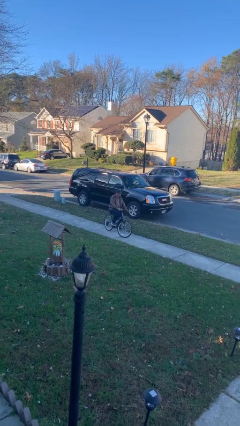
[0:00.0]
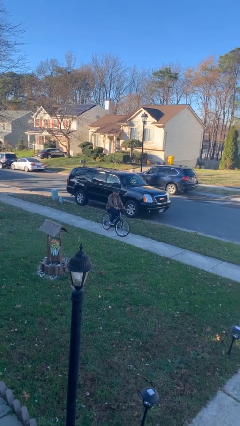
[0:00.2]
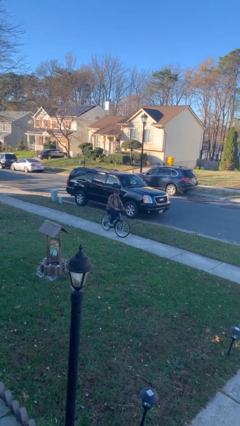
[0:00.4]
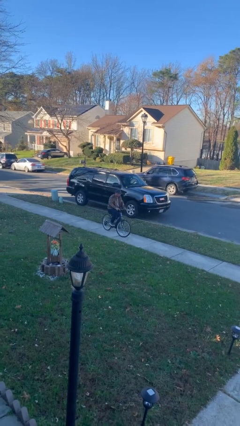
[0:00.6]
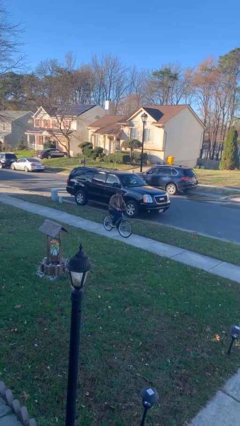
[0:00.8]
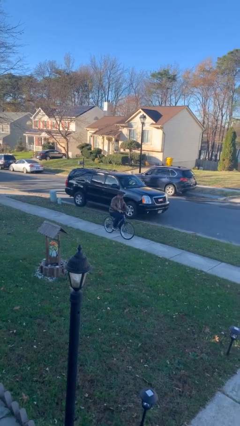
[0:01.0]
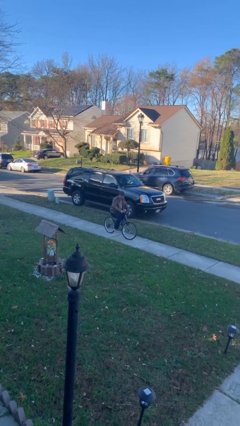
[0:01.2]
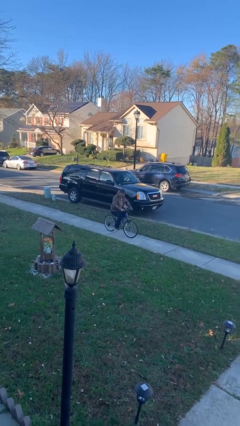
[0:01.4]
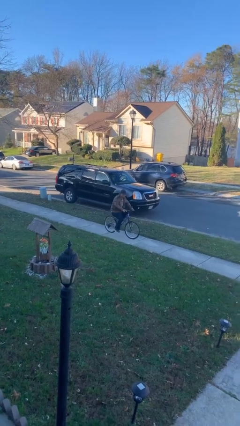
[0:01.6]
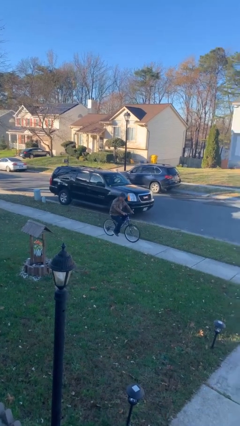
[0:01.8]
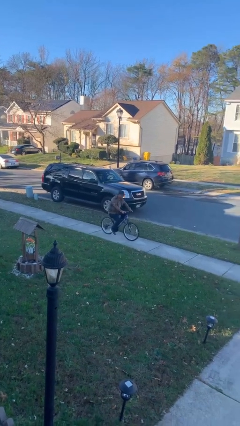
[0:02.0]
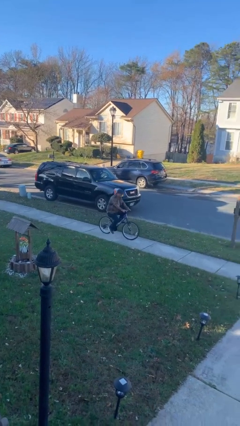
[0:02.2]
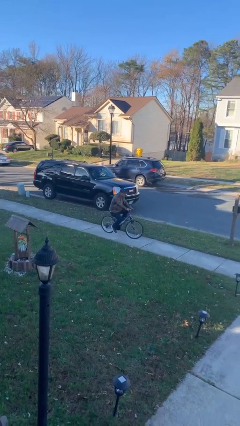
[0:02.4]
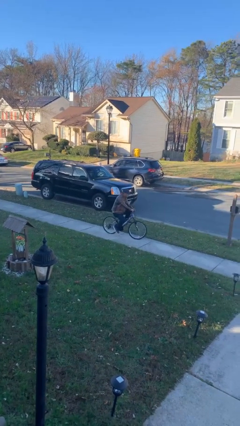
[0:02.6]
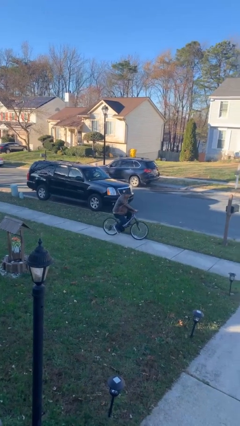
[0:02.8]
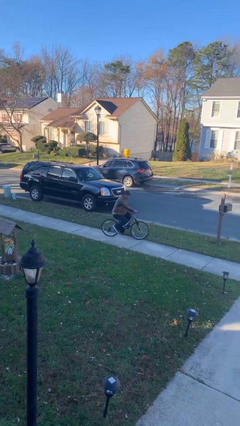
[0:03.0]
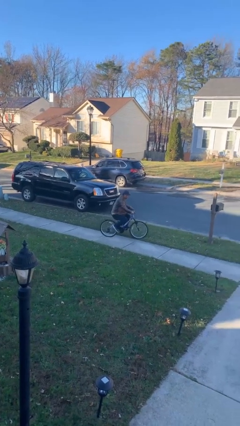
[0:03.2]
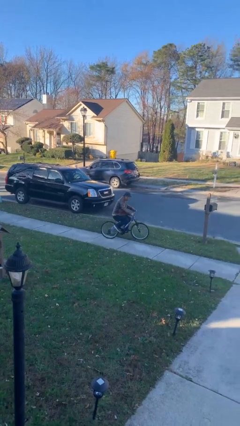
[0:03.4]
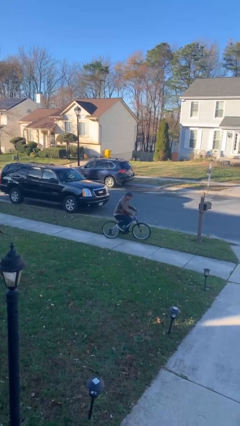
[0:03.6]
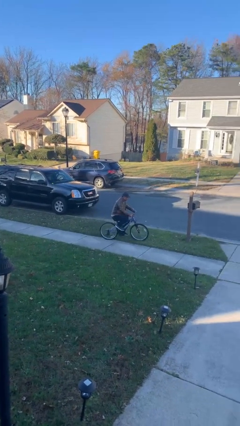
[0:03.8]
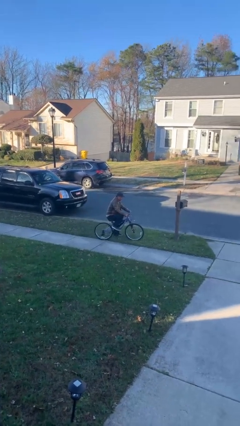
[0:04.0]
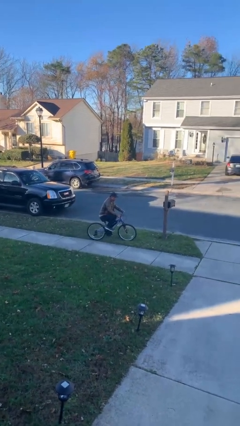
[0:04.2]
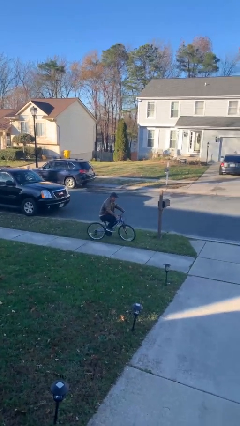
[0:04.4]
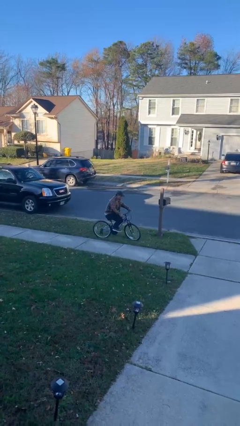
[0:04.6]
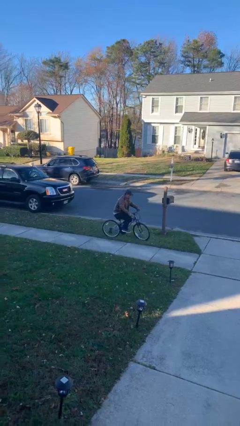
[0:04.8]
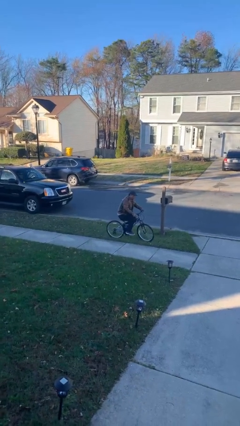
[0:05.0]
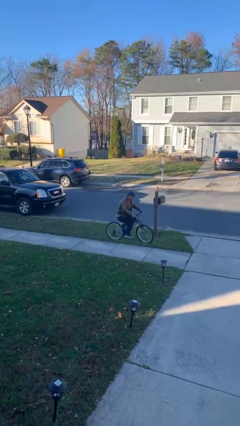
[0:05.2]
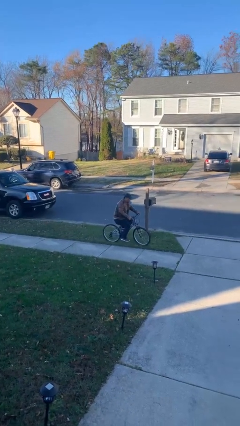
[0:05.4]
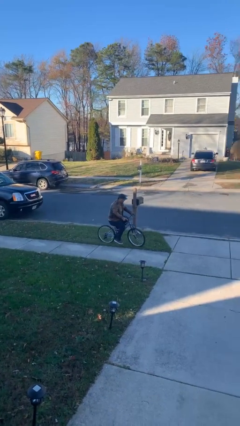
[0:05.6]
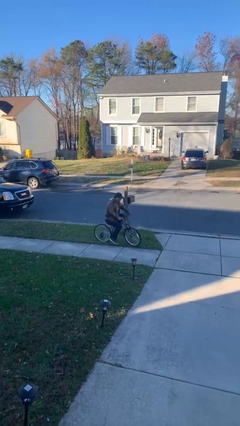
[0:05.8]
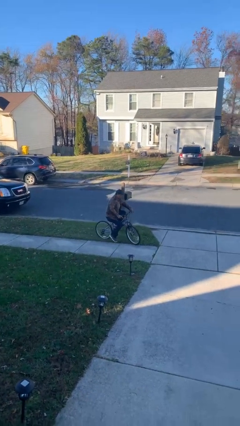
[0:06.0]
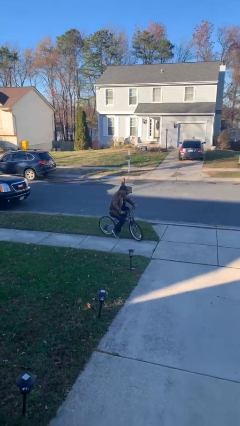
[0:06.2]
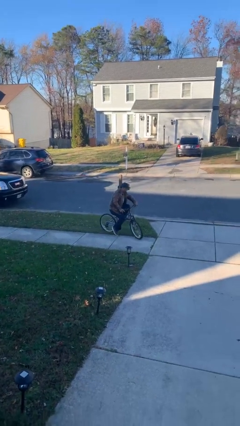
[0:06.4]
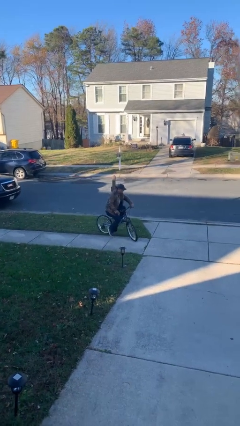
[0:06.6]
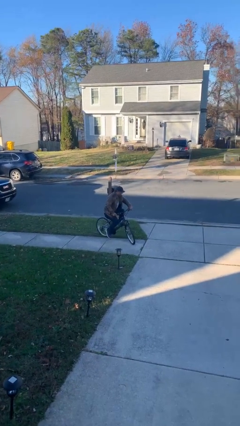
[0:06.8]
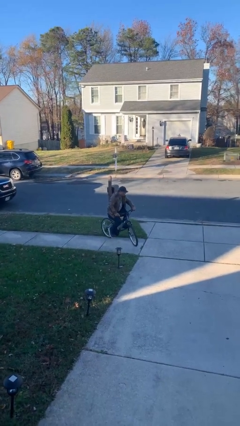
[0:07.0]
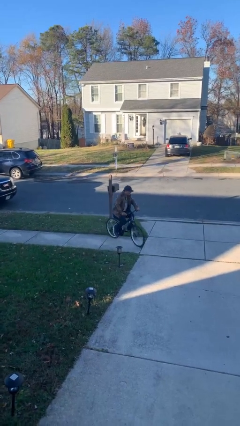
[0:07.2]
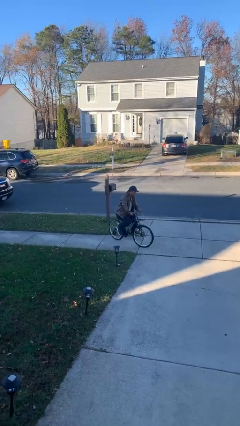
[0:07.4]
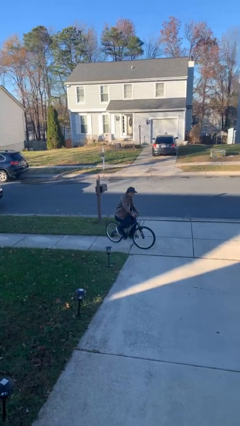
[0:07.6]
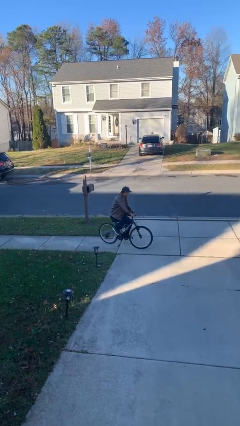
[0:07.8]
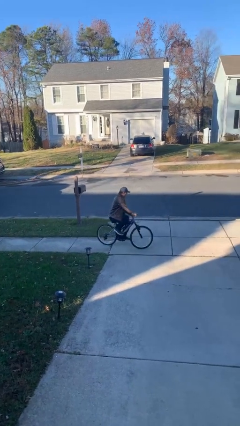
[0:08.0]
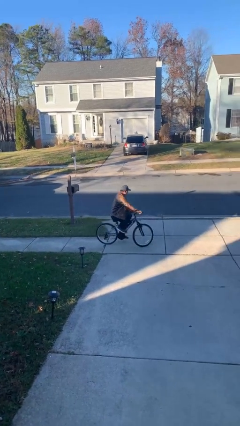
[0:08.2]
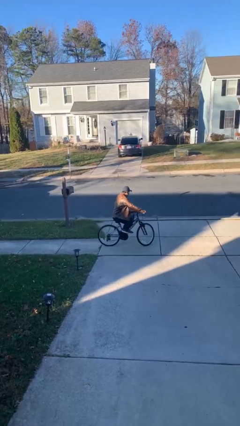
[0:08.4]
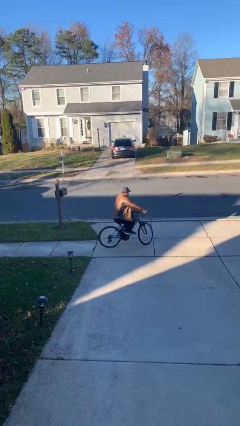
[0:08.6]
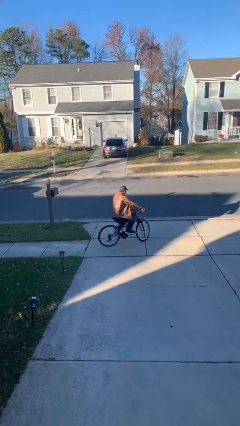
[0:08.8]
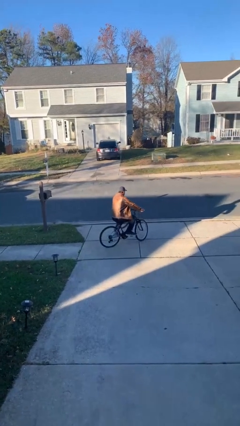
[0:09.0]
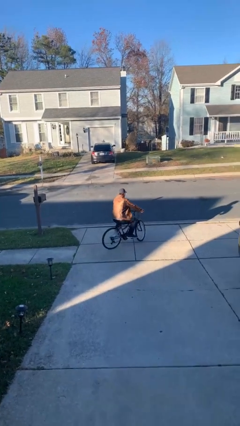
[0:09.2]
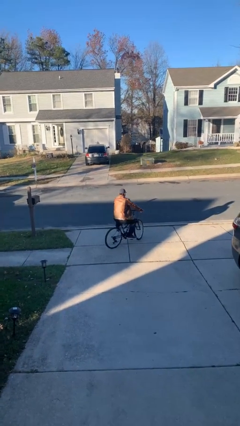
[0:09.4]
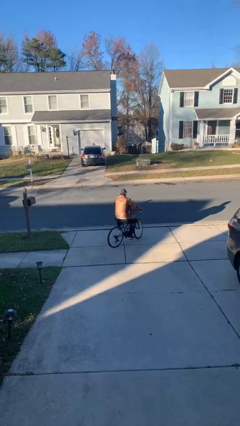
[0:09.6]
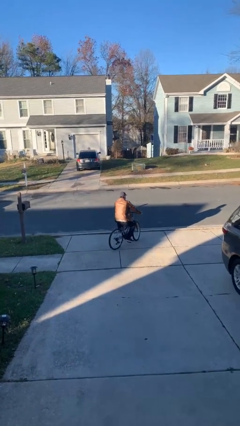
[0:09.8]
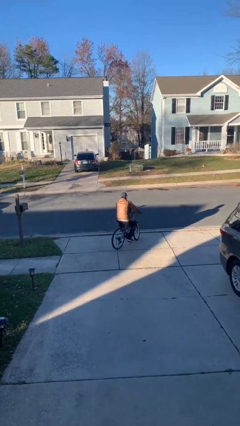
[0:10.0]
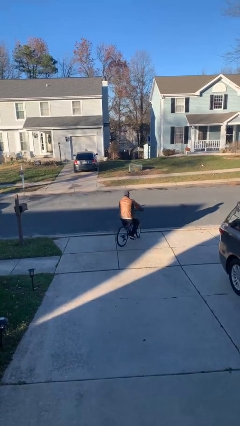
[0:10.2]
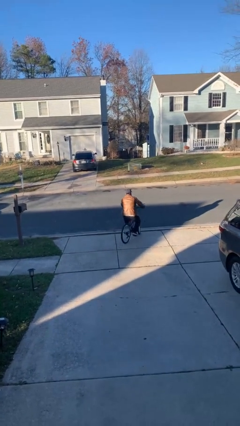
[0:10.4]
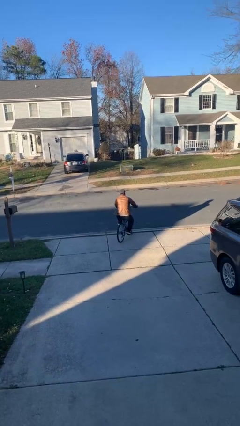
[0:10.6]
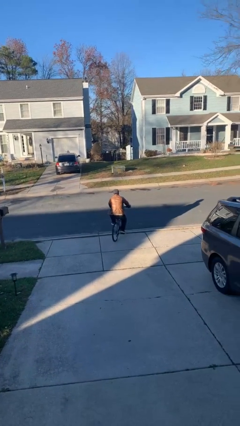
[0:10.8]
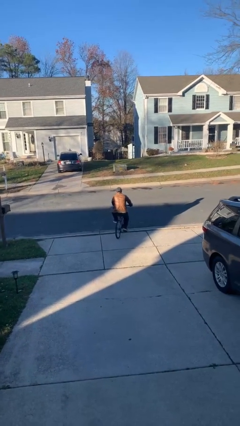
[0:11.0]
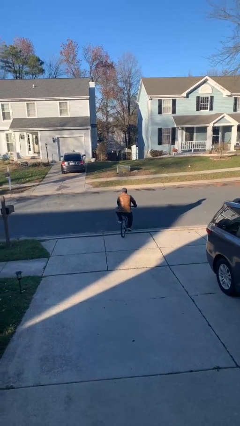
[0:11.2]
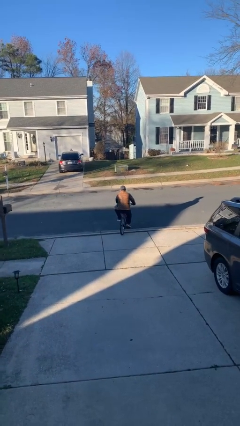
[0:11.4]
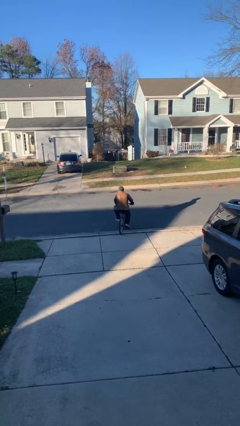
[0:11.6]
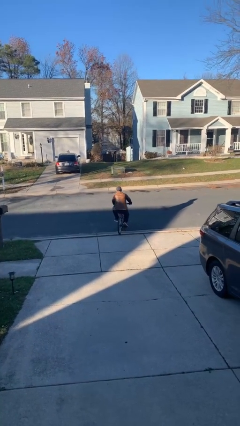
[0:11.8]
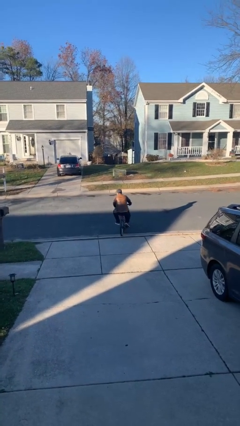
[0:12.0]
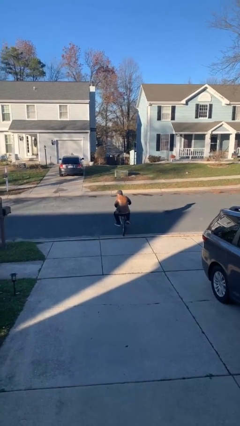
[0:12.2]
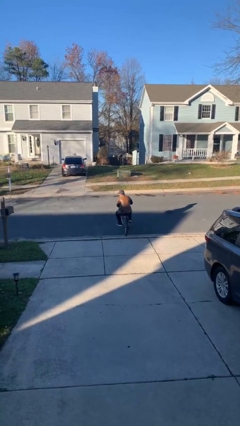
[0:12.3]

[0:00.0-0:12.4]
person rides bicycle

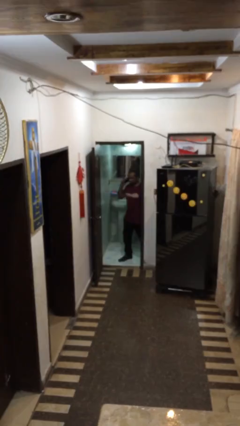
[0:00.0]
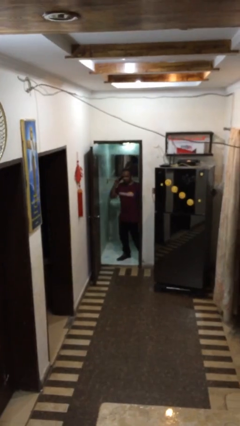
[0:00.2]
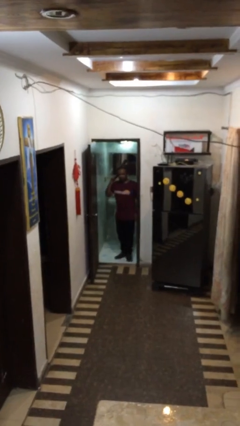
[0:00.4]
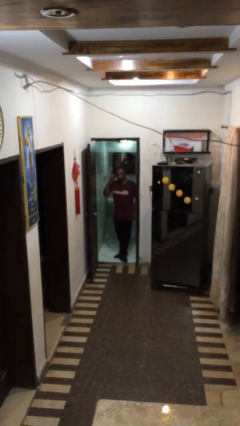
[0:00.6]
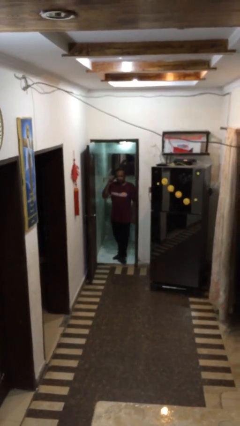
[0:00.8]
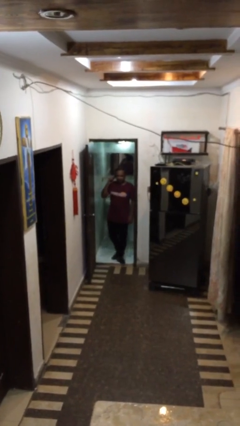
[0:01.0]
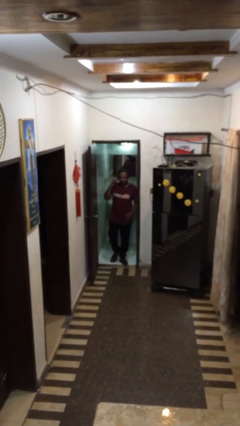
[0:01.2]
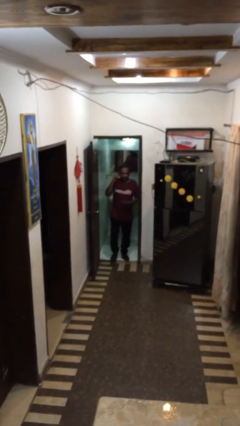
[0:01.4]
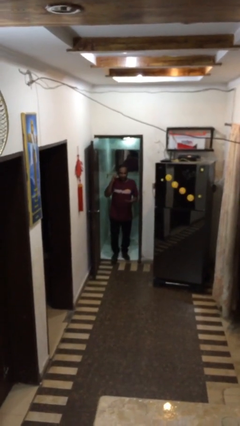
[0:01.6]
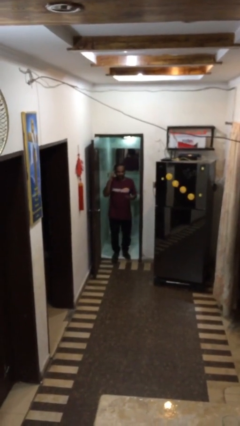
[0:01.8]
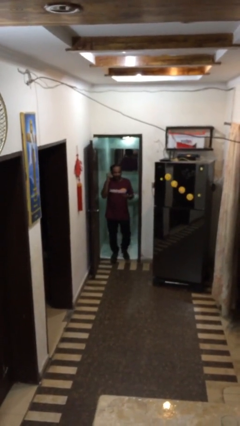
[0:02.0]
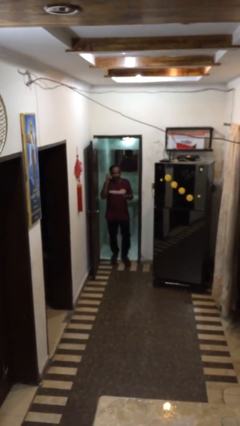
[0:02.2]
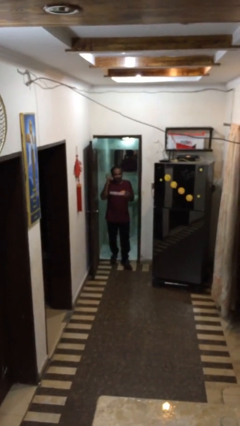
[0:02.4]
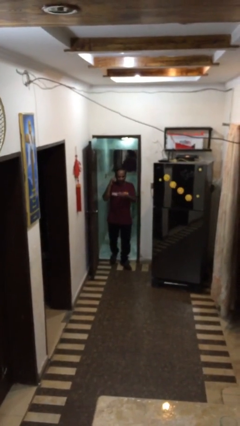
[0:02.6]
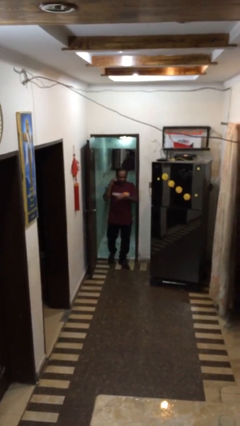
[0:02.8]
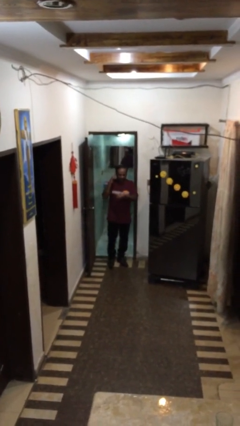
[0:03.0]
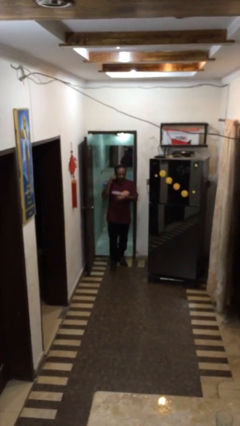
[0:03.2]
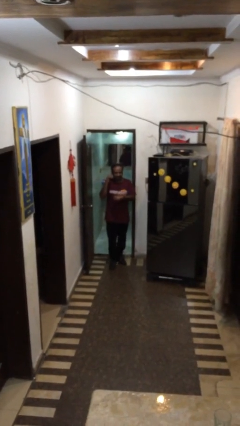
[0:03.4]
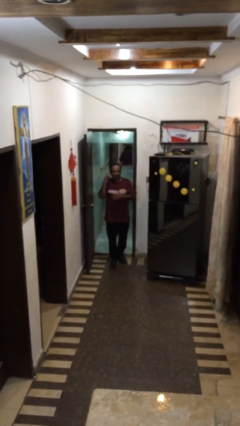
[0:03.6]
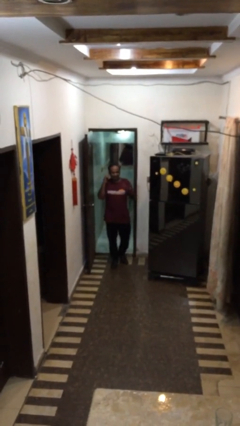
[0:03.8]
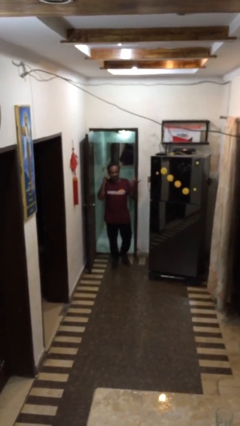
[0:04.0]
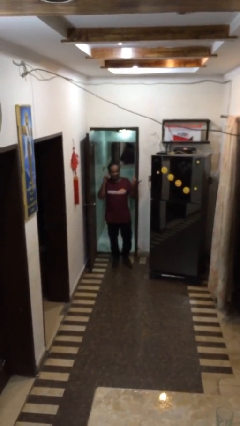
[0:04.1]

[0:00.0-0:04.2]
person enters scene through structure

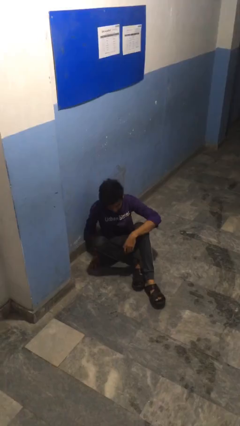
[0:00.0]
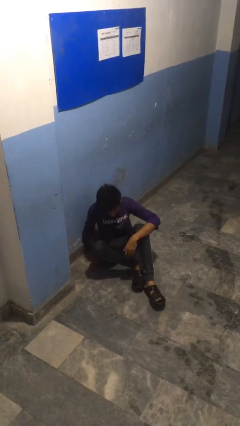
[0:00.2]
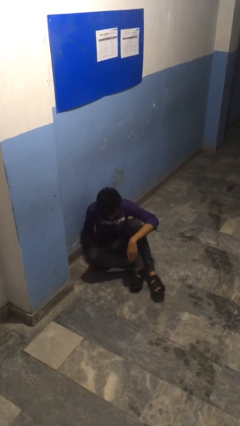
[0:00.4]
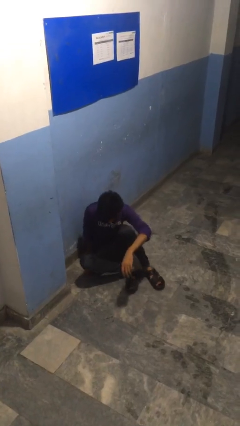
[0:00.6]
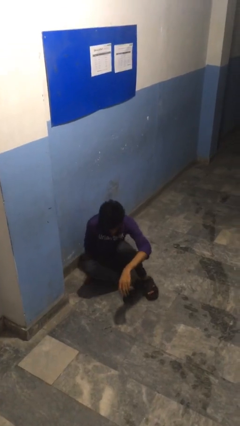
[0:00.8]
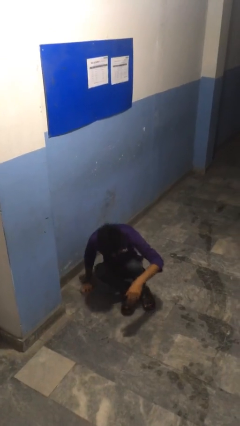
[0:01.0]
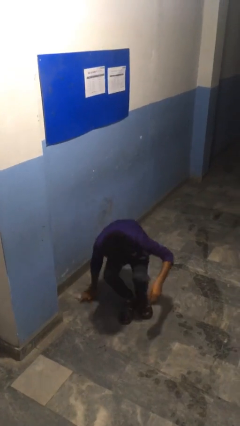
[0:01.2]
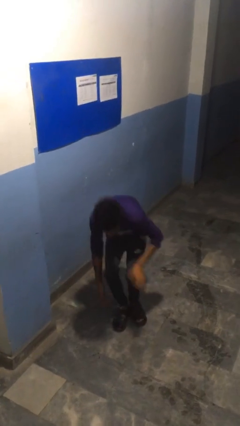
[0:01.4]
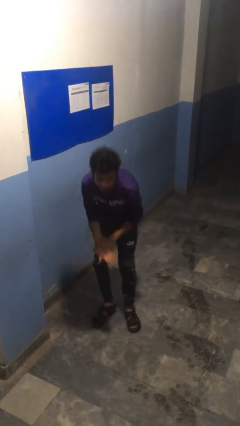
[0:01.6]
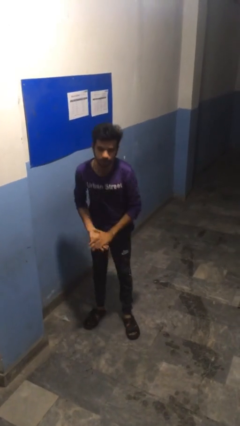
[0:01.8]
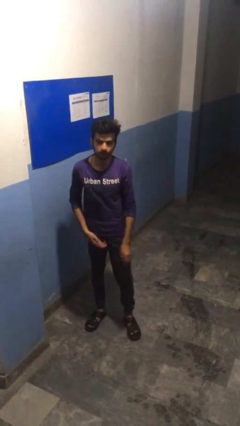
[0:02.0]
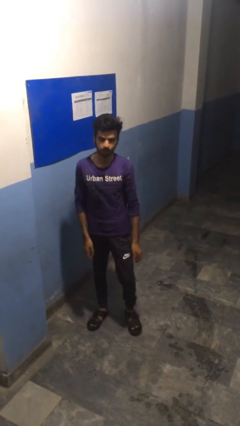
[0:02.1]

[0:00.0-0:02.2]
person stands up from floor
